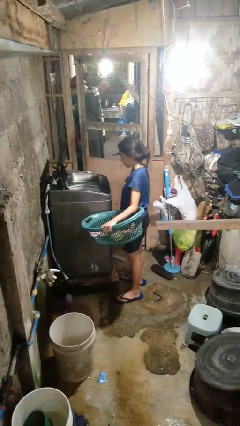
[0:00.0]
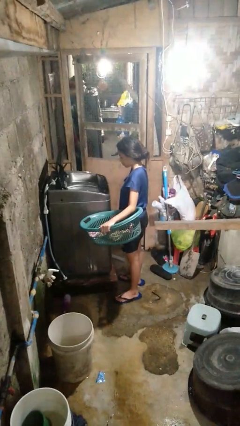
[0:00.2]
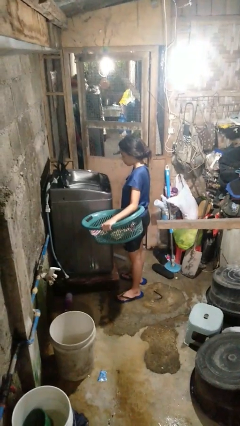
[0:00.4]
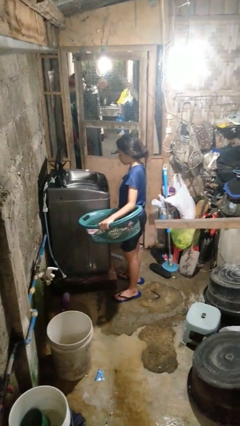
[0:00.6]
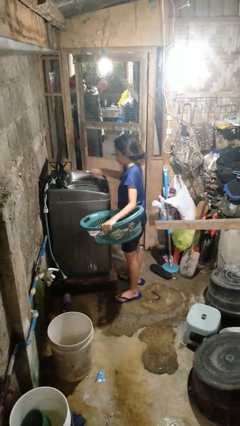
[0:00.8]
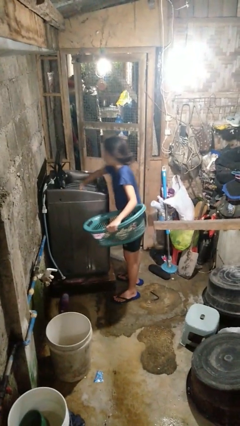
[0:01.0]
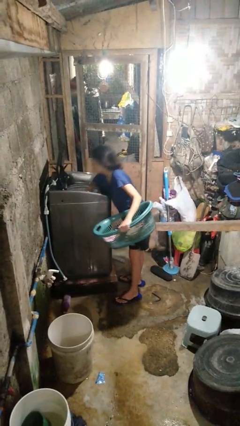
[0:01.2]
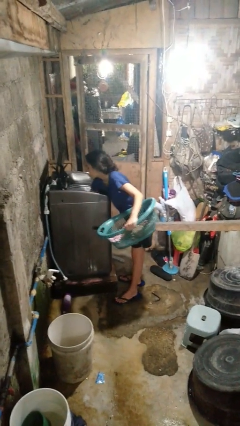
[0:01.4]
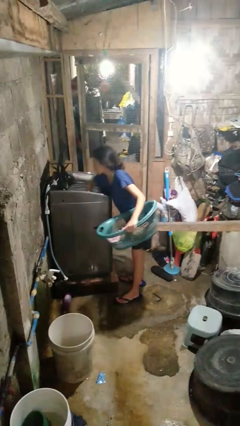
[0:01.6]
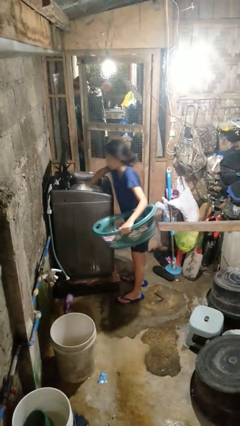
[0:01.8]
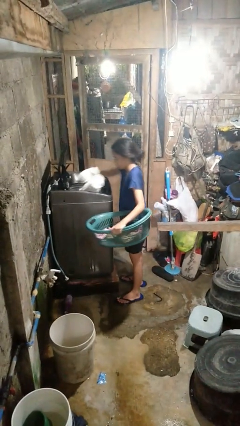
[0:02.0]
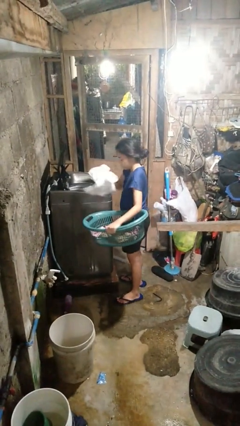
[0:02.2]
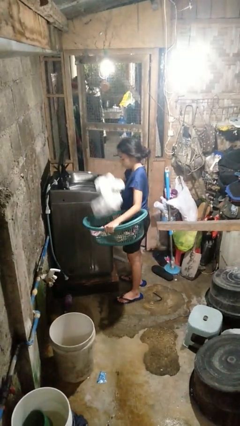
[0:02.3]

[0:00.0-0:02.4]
person unloads clotheswasher

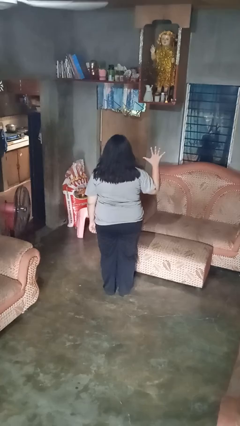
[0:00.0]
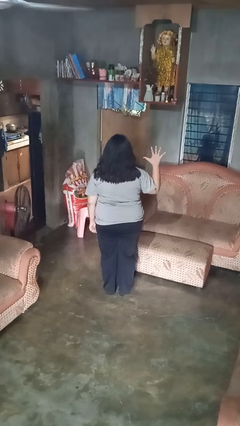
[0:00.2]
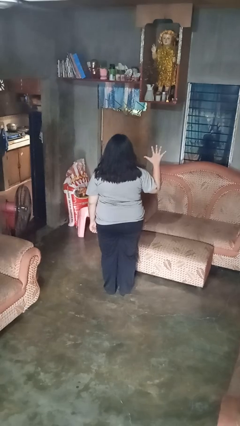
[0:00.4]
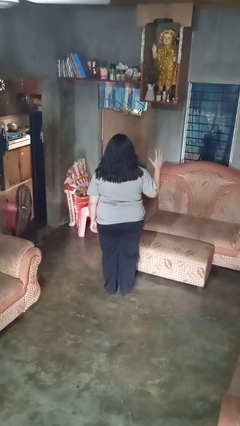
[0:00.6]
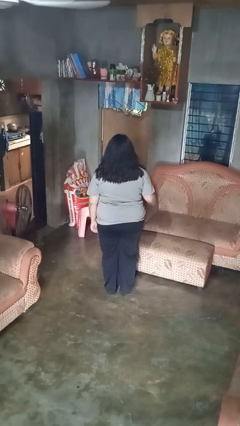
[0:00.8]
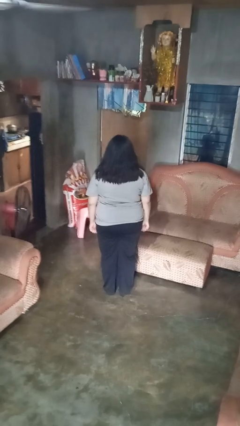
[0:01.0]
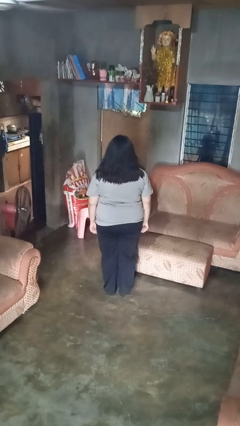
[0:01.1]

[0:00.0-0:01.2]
person gestures number five

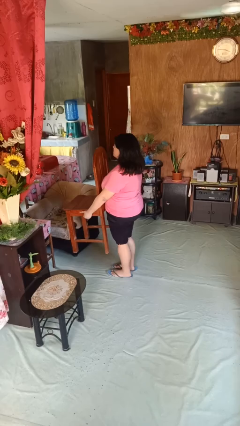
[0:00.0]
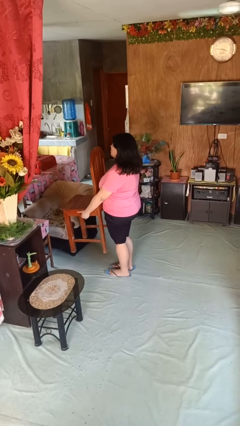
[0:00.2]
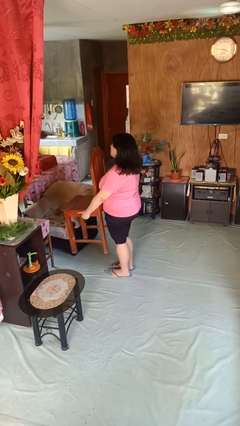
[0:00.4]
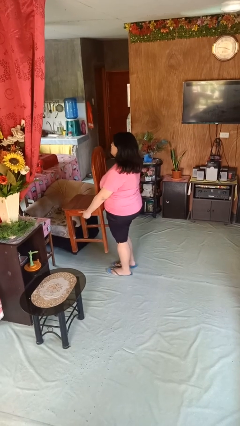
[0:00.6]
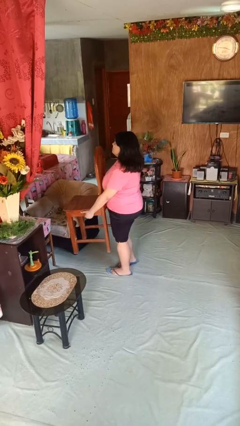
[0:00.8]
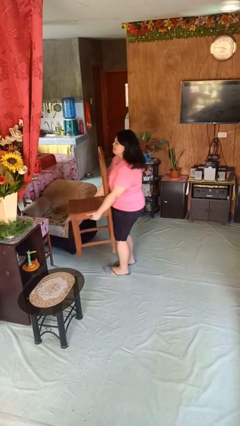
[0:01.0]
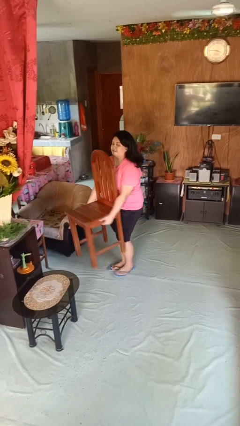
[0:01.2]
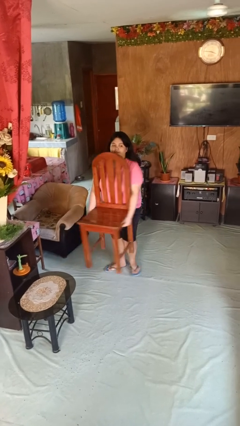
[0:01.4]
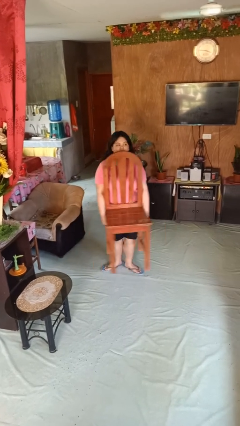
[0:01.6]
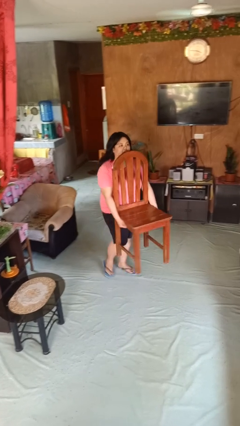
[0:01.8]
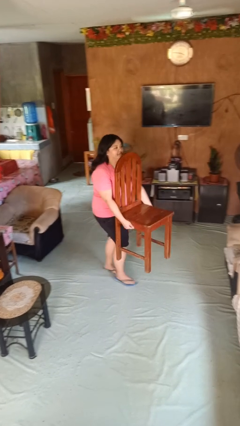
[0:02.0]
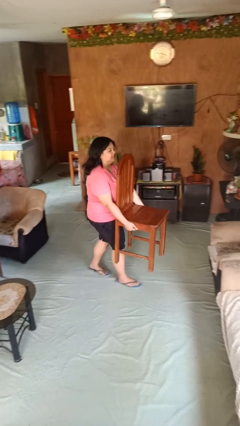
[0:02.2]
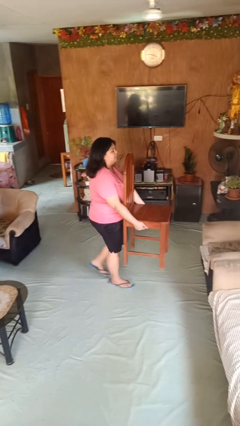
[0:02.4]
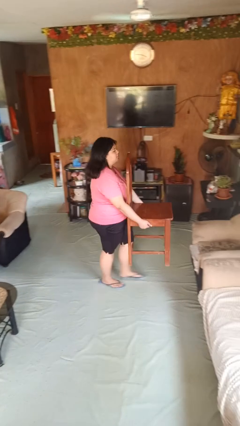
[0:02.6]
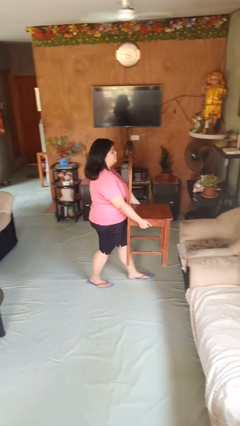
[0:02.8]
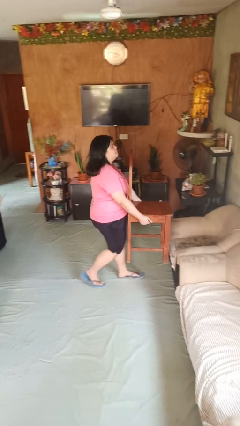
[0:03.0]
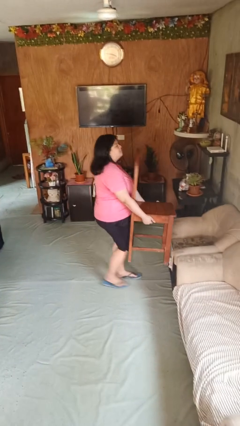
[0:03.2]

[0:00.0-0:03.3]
person carries furniture

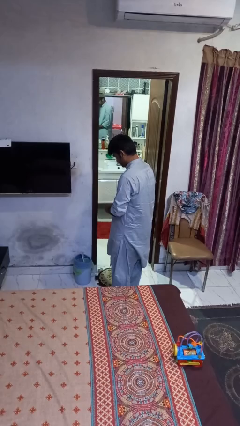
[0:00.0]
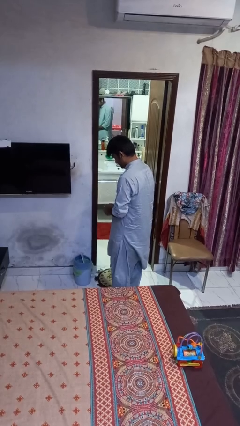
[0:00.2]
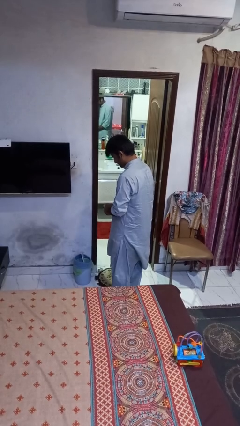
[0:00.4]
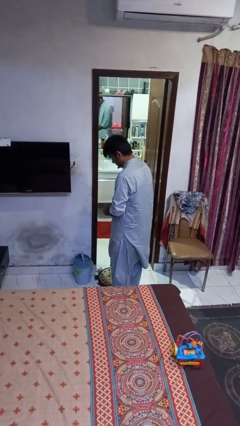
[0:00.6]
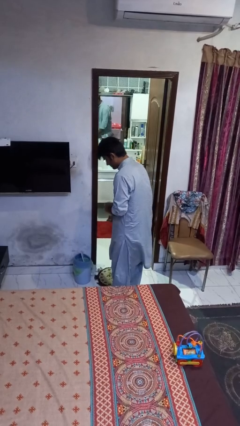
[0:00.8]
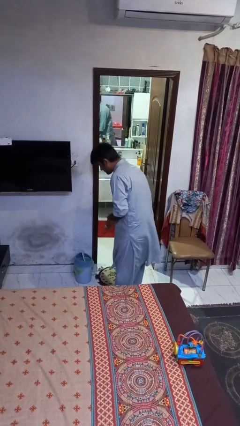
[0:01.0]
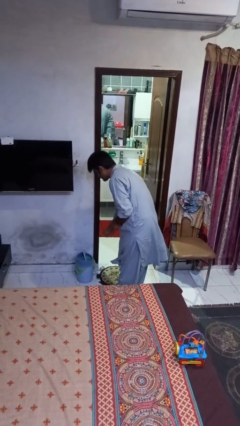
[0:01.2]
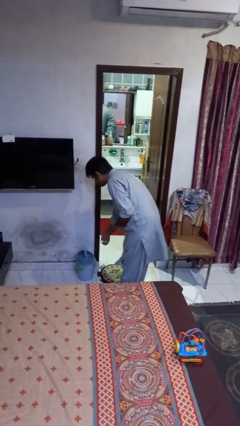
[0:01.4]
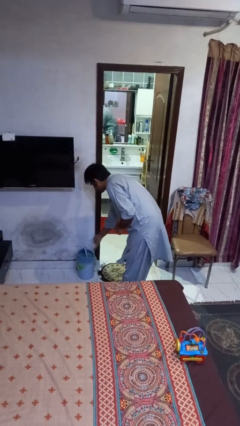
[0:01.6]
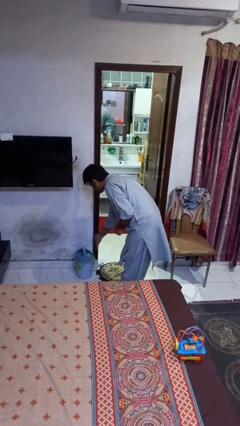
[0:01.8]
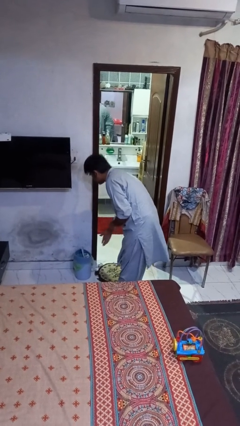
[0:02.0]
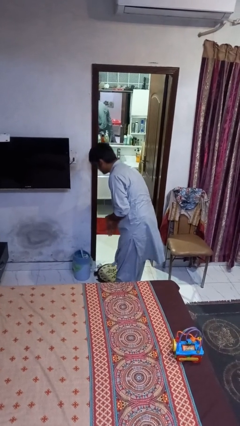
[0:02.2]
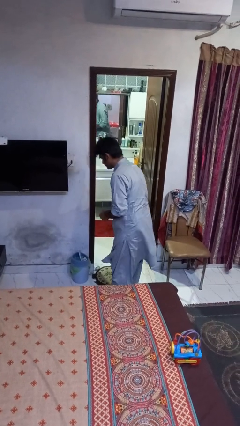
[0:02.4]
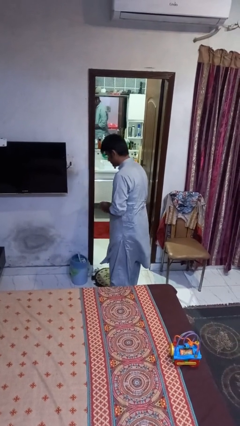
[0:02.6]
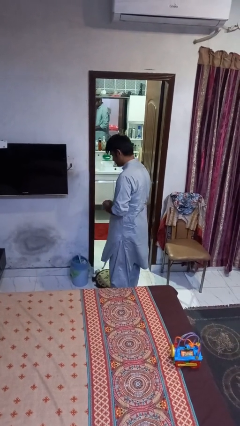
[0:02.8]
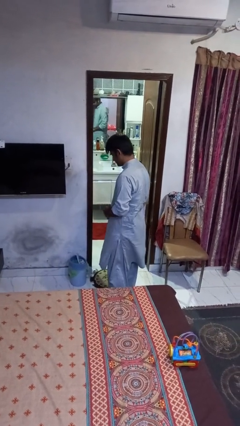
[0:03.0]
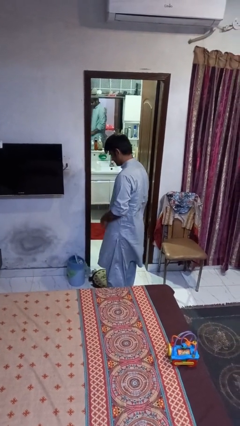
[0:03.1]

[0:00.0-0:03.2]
person discards trash

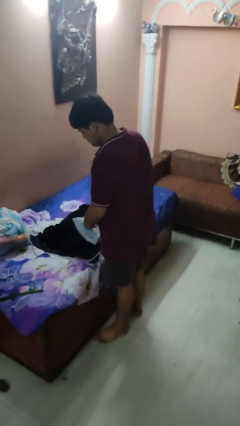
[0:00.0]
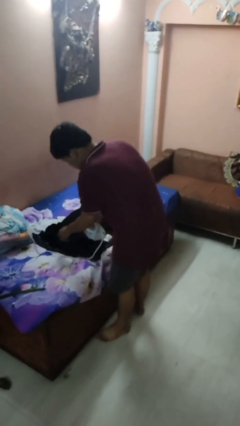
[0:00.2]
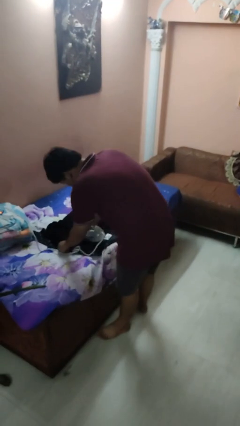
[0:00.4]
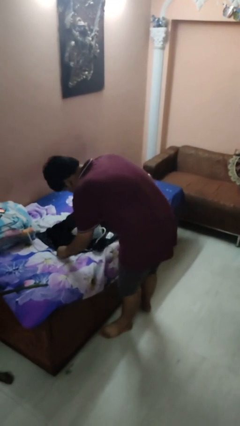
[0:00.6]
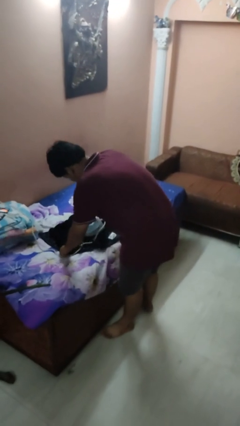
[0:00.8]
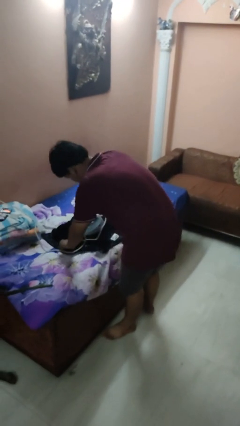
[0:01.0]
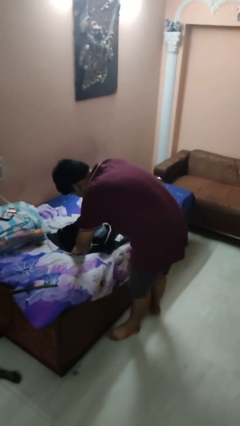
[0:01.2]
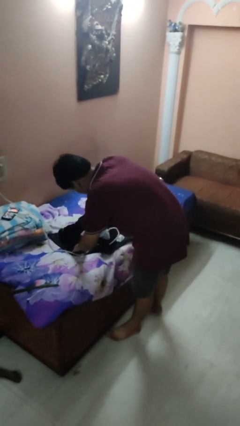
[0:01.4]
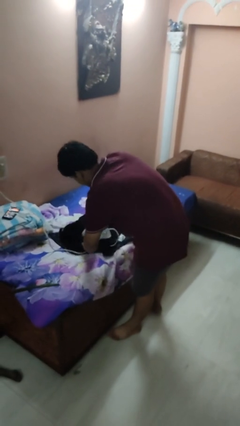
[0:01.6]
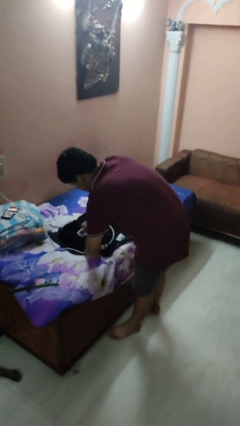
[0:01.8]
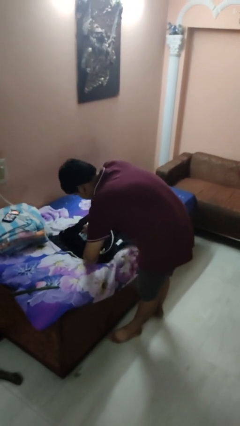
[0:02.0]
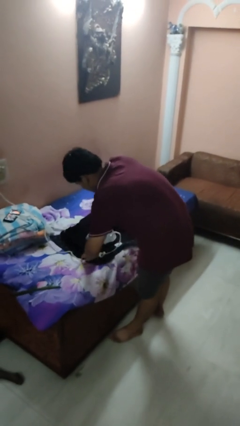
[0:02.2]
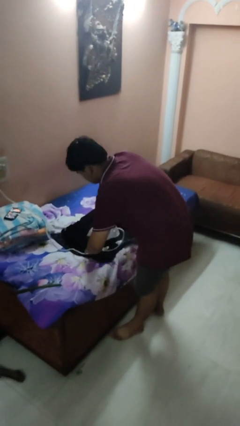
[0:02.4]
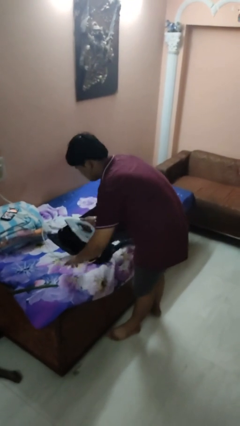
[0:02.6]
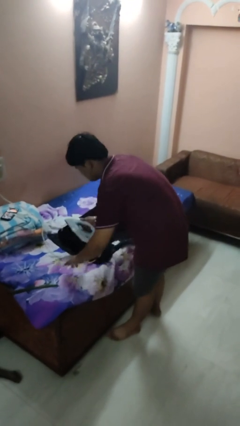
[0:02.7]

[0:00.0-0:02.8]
person irons clothes

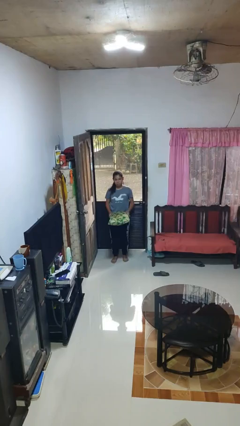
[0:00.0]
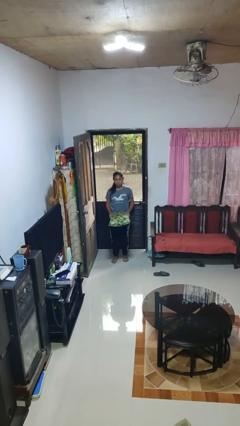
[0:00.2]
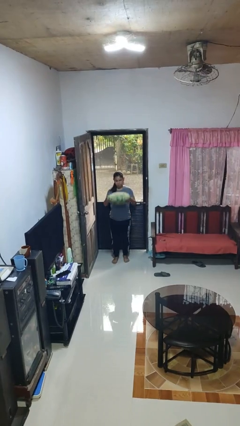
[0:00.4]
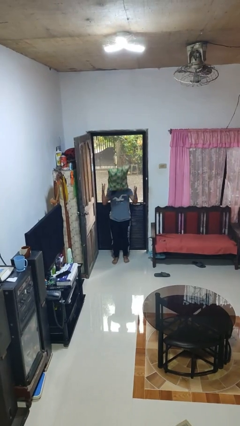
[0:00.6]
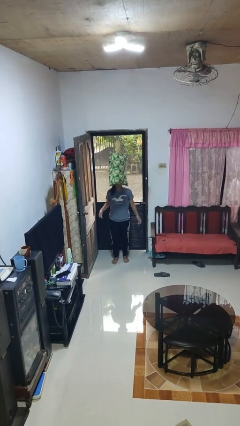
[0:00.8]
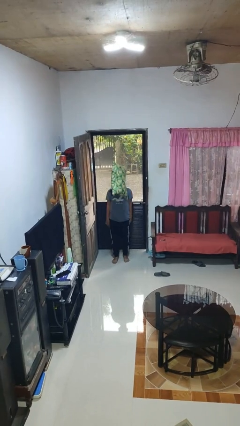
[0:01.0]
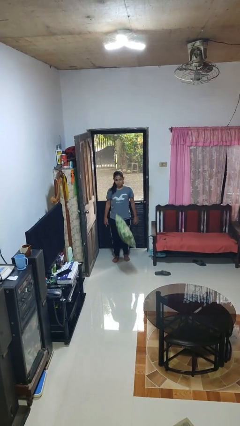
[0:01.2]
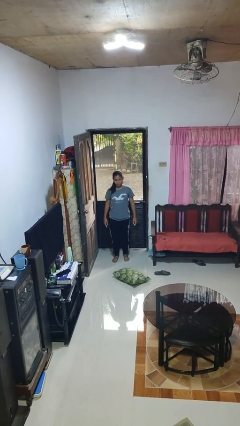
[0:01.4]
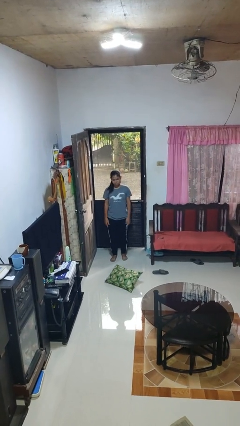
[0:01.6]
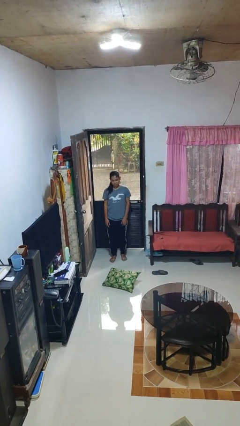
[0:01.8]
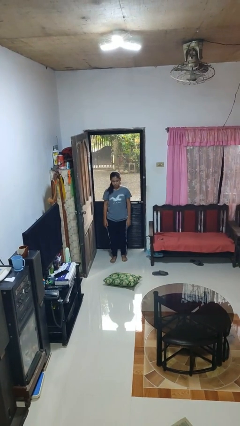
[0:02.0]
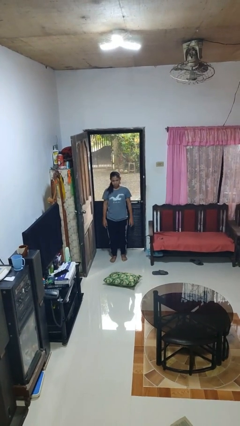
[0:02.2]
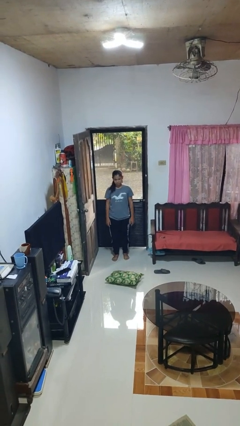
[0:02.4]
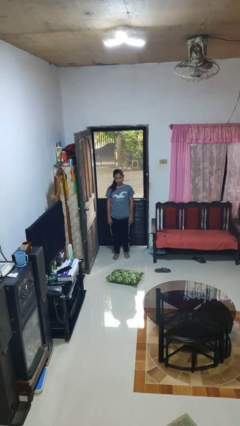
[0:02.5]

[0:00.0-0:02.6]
person throws object into air

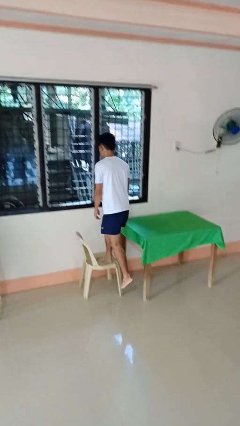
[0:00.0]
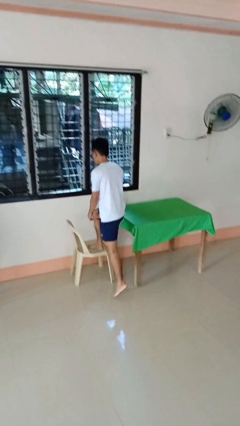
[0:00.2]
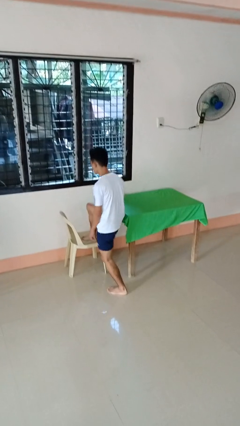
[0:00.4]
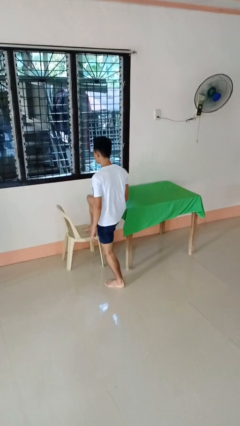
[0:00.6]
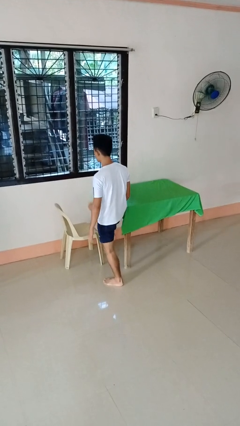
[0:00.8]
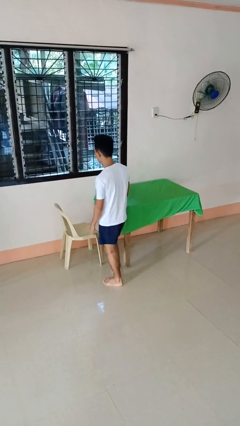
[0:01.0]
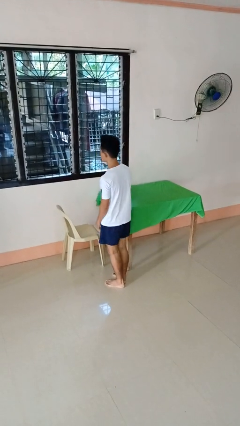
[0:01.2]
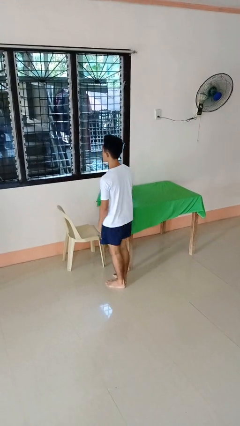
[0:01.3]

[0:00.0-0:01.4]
person climbs off chair
